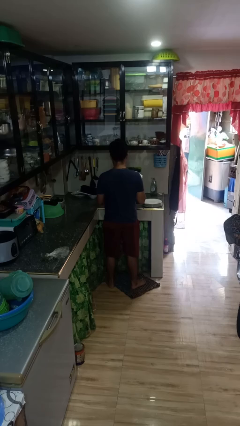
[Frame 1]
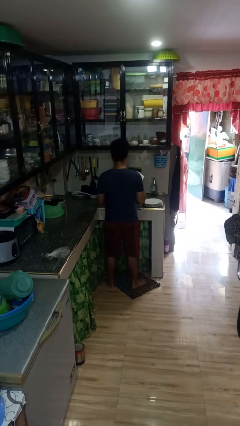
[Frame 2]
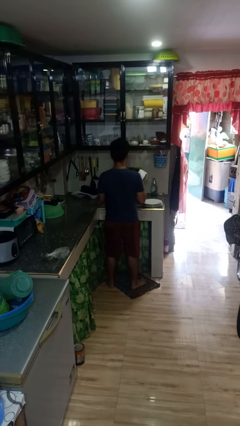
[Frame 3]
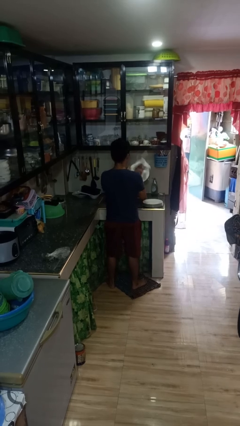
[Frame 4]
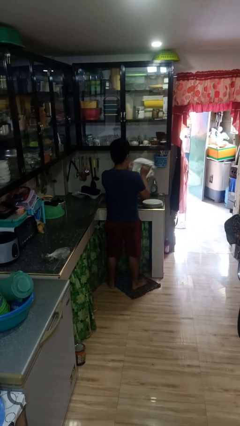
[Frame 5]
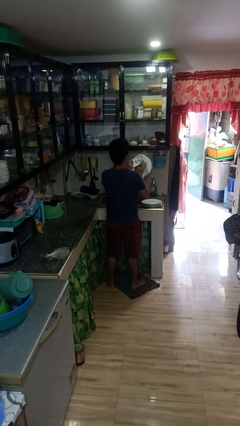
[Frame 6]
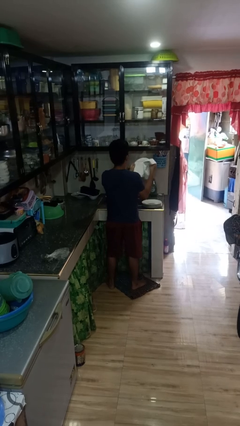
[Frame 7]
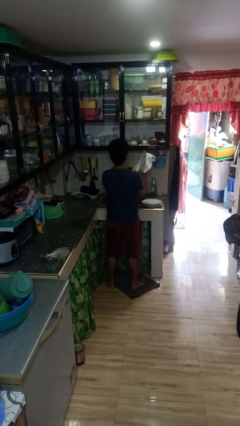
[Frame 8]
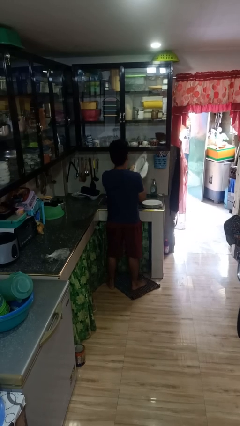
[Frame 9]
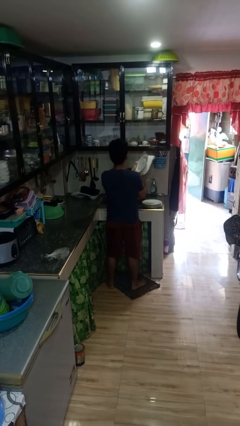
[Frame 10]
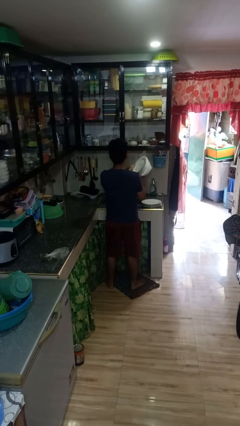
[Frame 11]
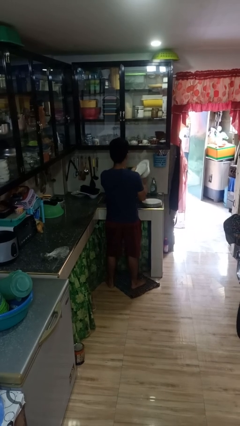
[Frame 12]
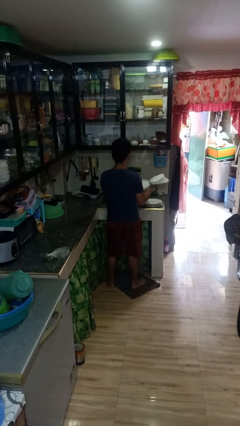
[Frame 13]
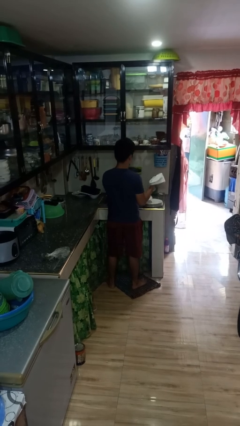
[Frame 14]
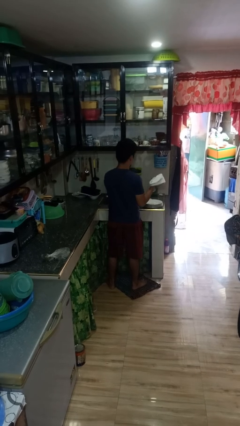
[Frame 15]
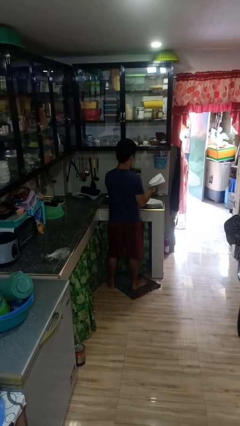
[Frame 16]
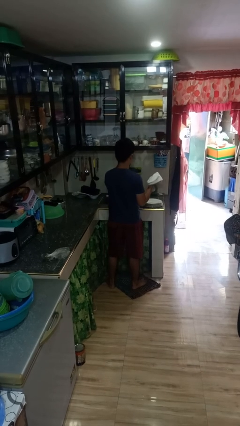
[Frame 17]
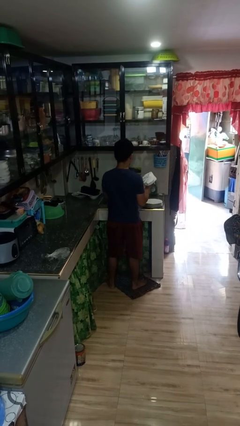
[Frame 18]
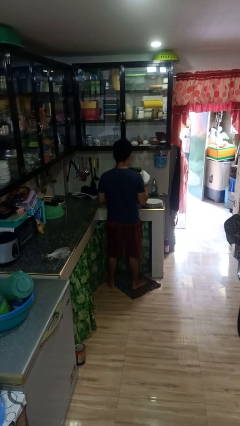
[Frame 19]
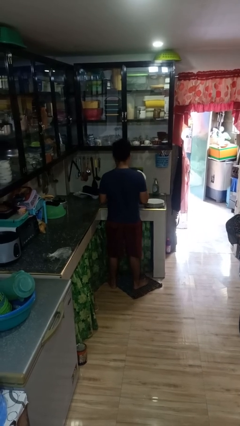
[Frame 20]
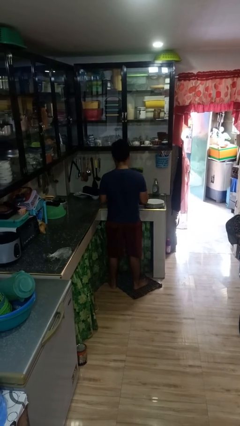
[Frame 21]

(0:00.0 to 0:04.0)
person dries dish

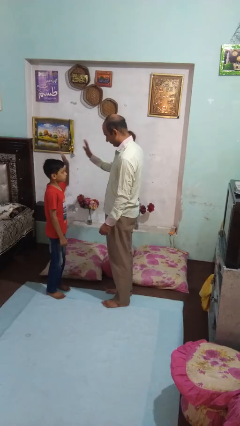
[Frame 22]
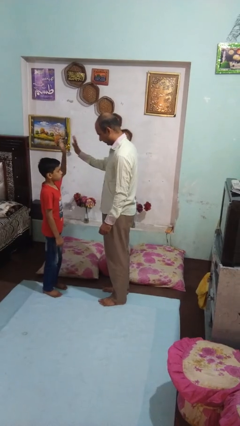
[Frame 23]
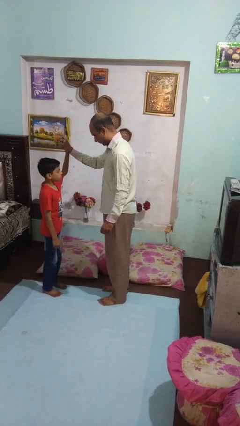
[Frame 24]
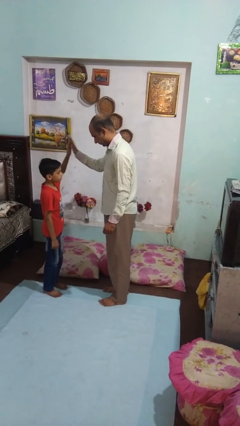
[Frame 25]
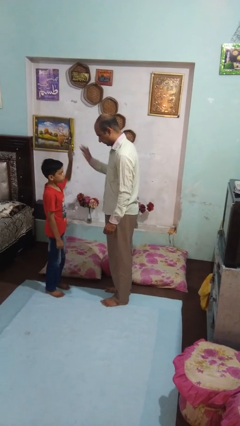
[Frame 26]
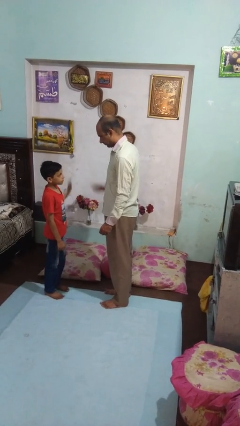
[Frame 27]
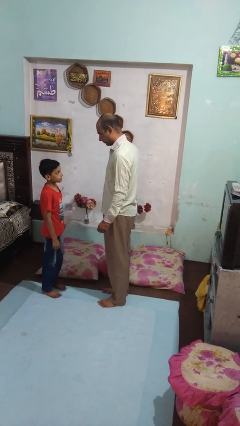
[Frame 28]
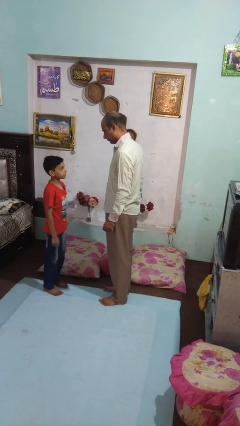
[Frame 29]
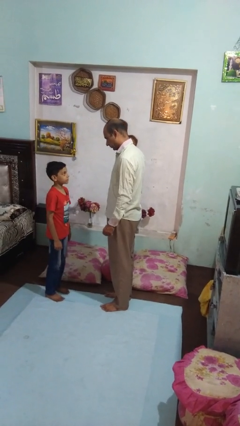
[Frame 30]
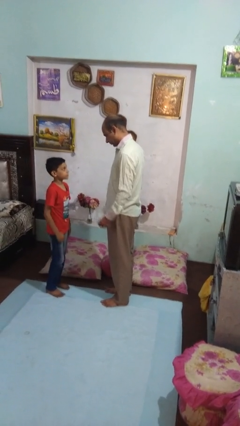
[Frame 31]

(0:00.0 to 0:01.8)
person highfives hand

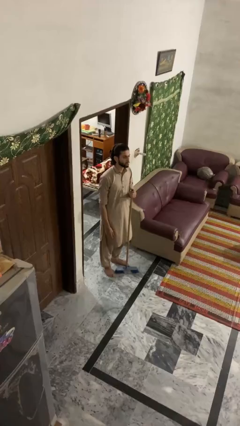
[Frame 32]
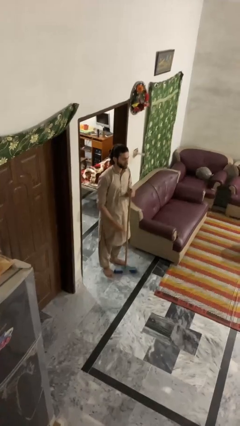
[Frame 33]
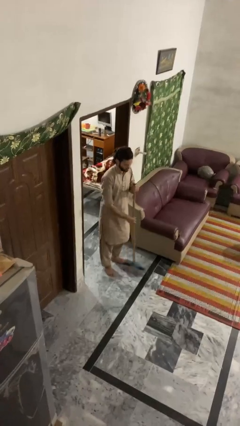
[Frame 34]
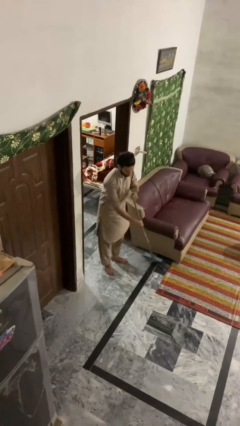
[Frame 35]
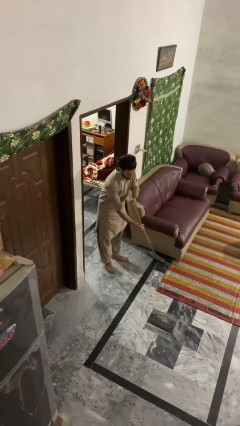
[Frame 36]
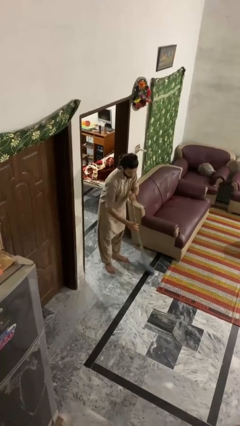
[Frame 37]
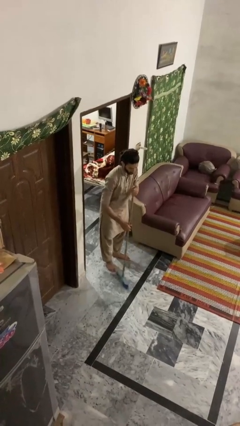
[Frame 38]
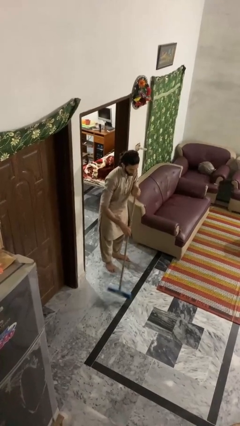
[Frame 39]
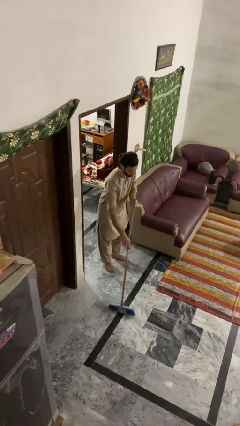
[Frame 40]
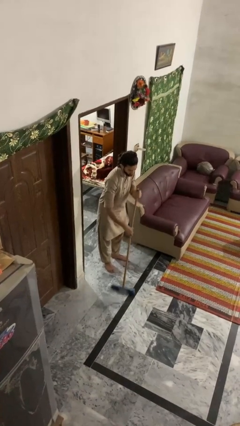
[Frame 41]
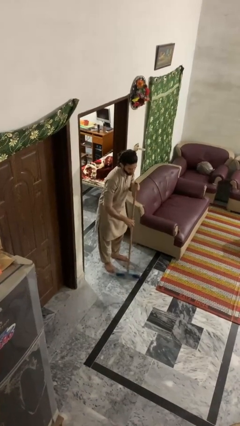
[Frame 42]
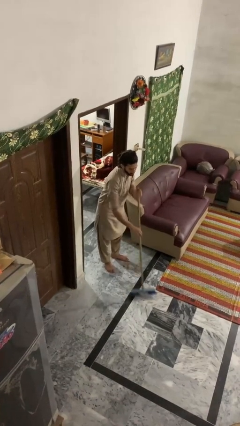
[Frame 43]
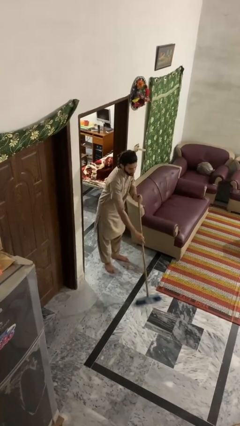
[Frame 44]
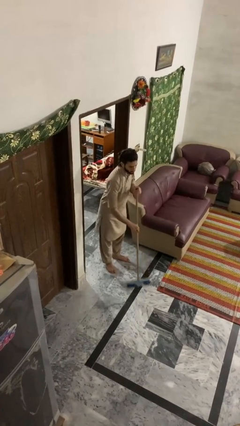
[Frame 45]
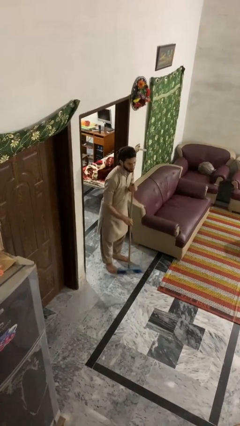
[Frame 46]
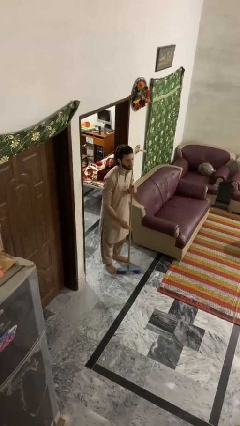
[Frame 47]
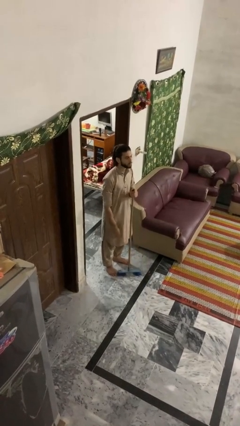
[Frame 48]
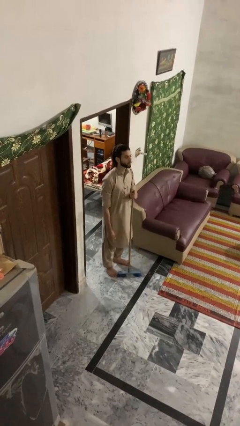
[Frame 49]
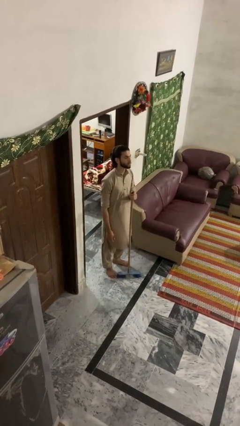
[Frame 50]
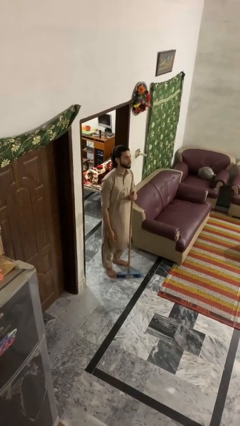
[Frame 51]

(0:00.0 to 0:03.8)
person sweeps floor

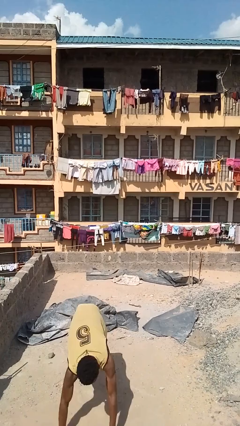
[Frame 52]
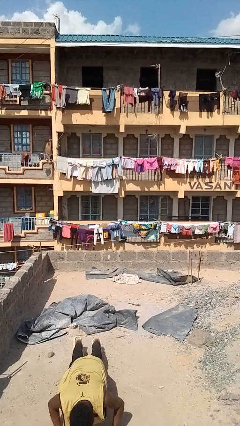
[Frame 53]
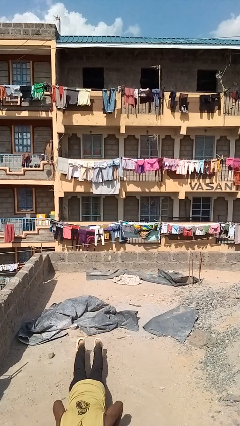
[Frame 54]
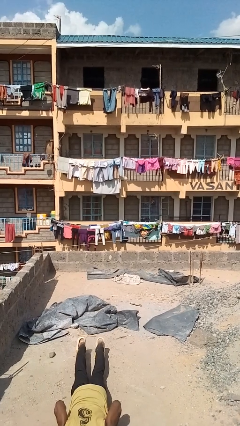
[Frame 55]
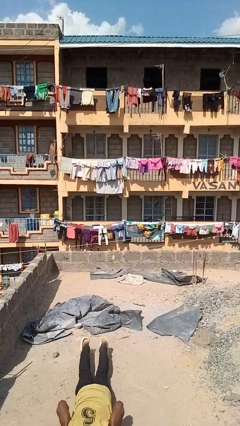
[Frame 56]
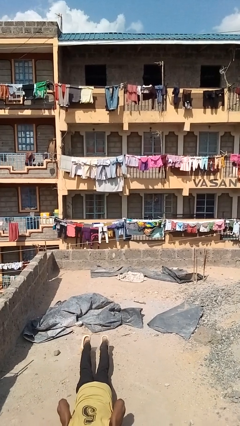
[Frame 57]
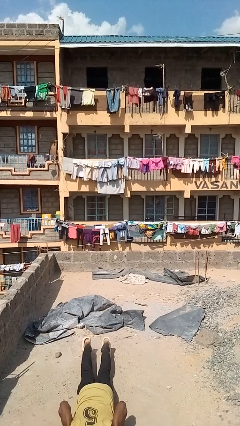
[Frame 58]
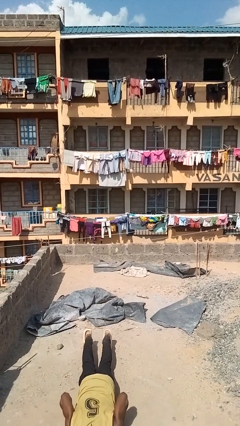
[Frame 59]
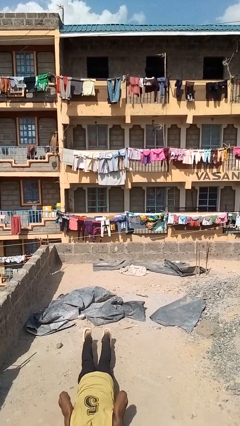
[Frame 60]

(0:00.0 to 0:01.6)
person falls while standing

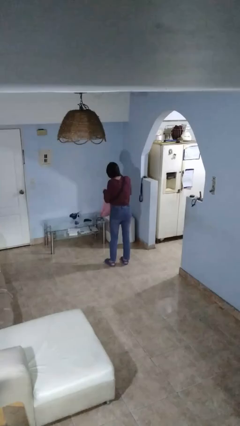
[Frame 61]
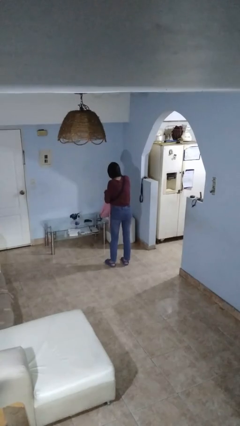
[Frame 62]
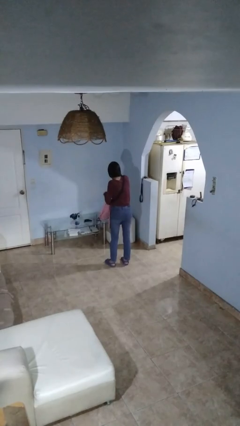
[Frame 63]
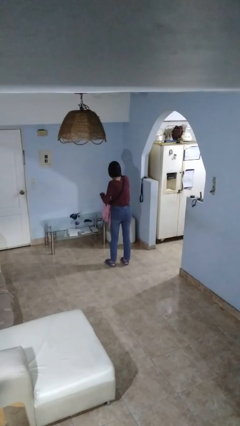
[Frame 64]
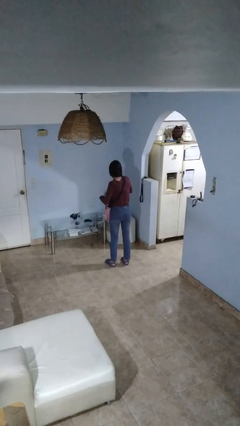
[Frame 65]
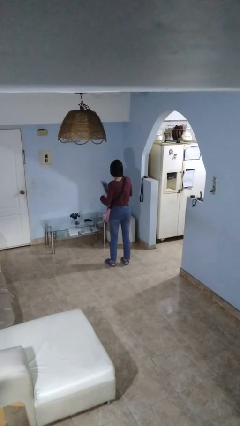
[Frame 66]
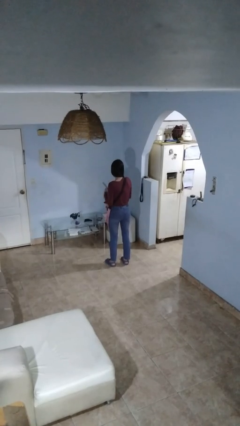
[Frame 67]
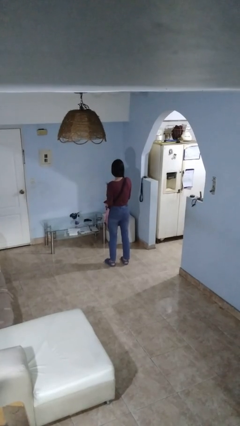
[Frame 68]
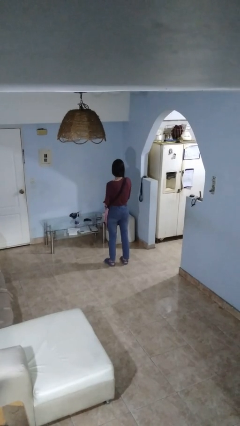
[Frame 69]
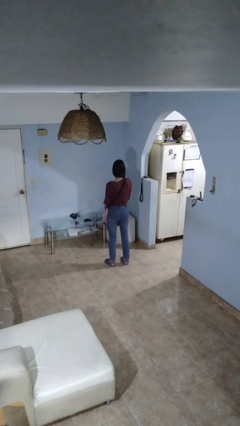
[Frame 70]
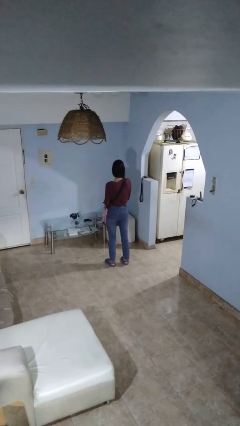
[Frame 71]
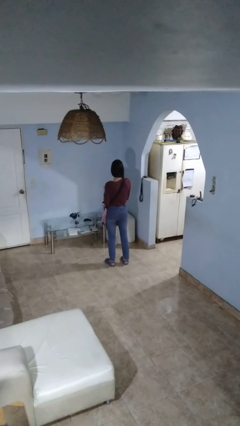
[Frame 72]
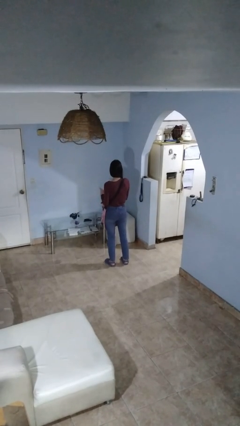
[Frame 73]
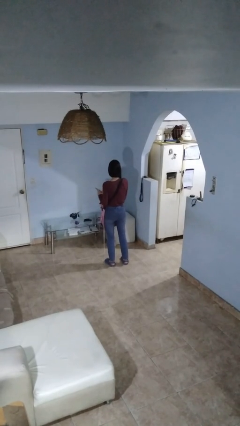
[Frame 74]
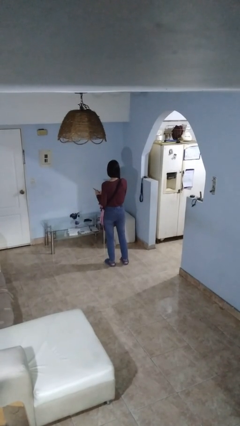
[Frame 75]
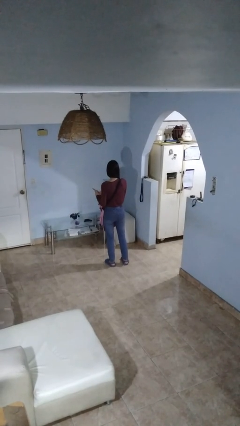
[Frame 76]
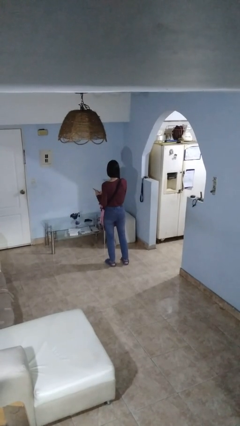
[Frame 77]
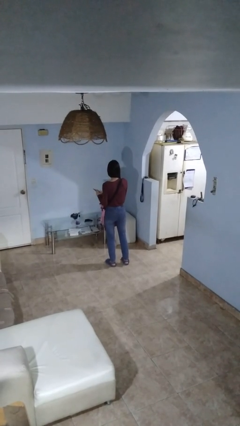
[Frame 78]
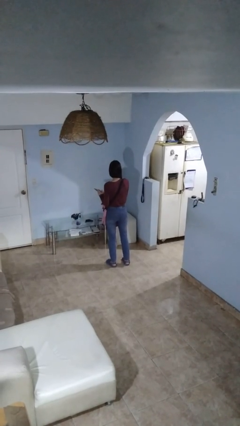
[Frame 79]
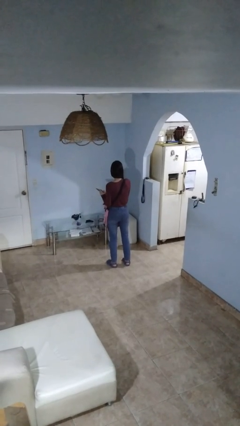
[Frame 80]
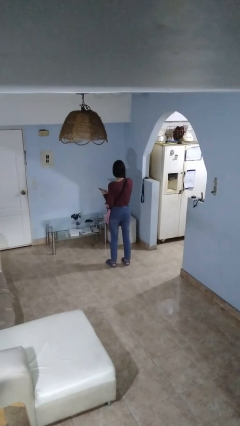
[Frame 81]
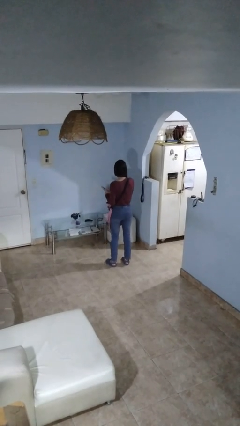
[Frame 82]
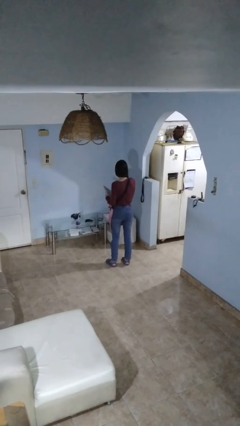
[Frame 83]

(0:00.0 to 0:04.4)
person takes object from backpack

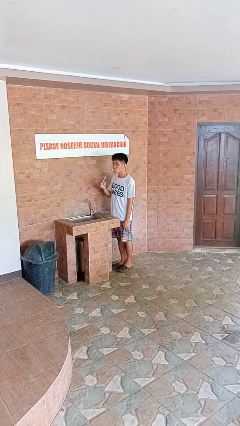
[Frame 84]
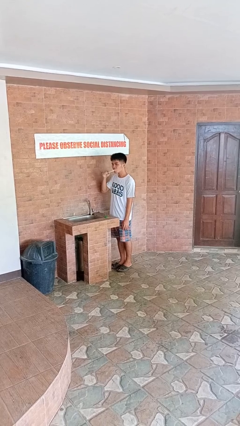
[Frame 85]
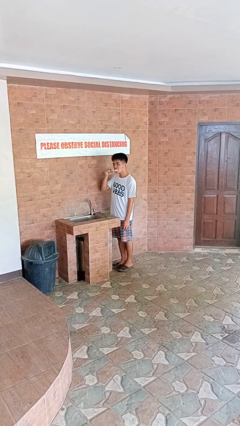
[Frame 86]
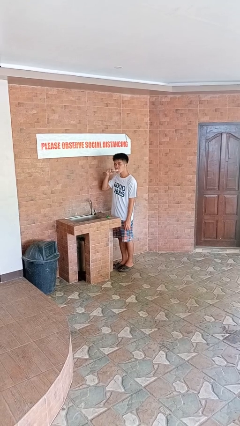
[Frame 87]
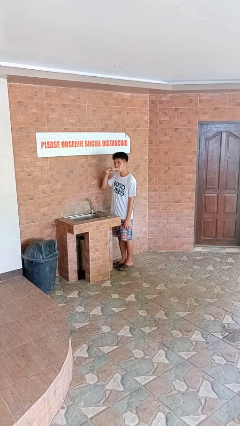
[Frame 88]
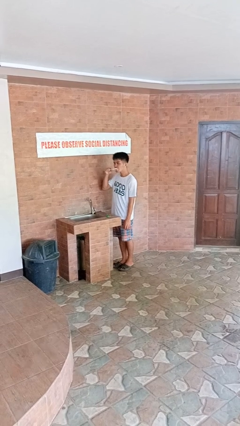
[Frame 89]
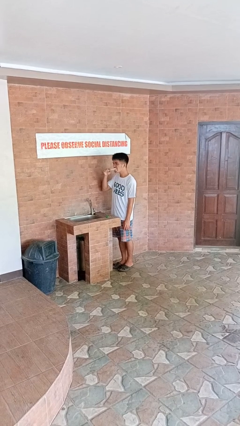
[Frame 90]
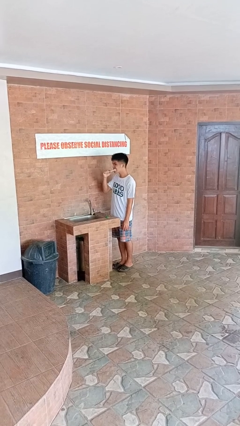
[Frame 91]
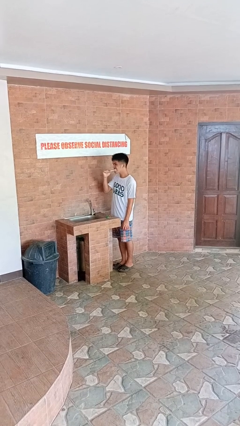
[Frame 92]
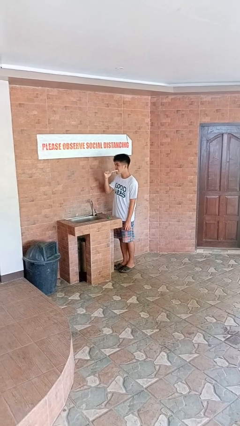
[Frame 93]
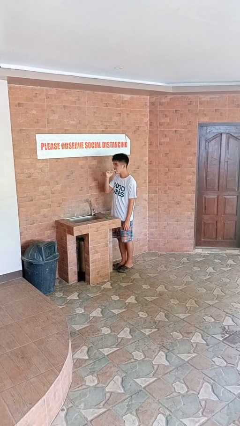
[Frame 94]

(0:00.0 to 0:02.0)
person brushes teeth
